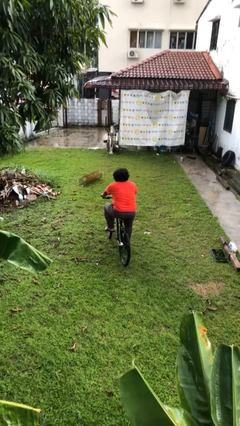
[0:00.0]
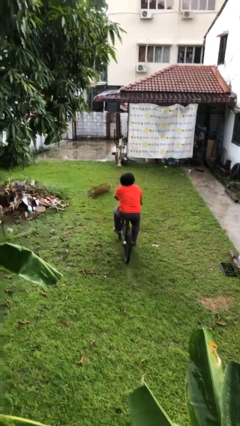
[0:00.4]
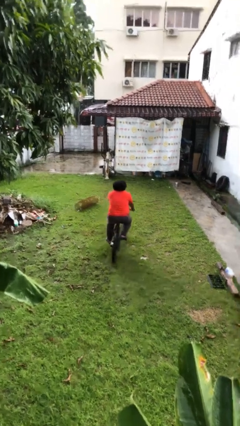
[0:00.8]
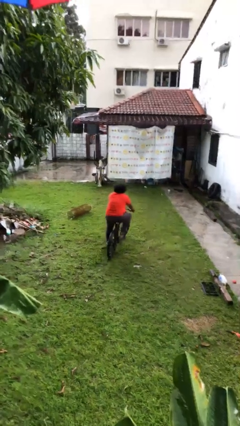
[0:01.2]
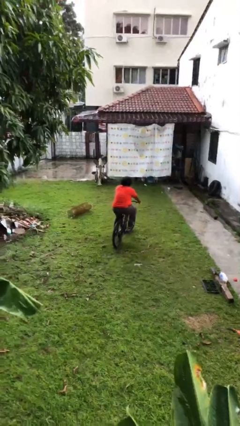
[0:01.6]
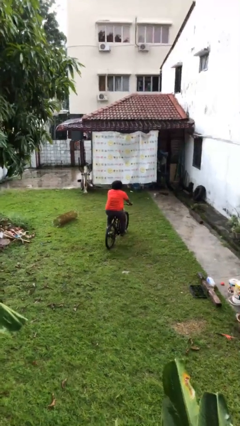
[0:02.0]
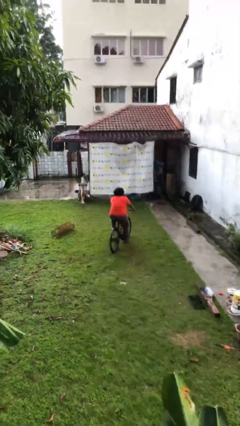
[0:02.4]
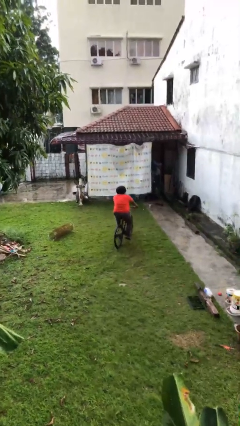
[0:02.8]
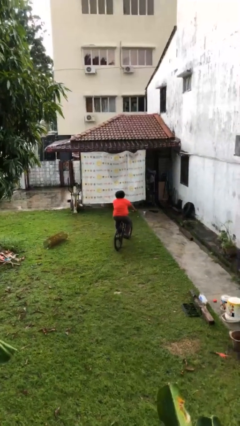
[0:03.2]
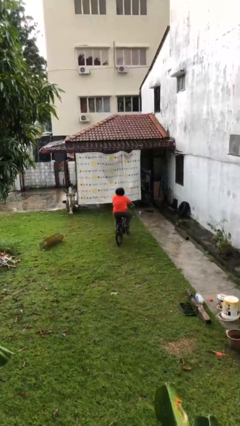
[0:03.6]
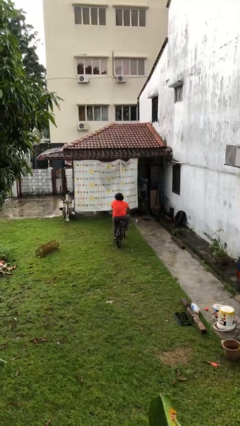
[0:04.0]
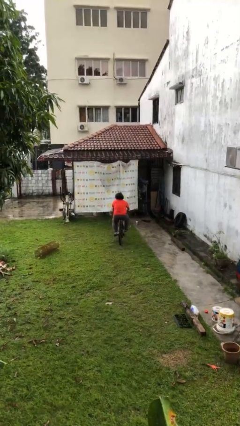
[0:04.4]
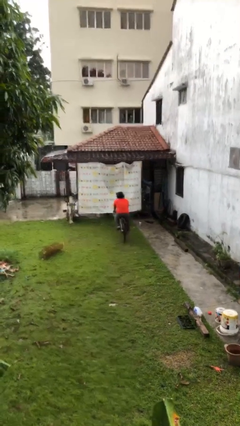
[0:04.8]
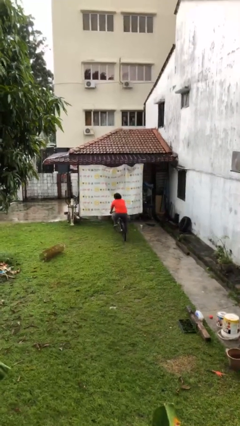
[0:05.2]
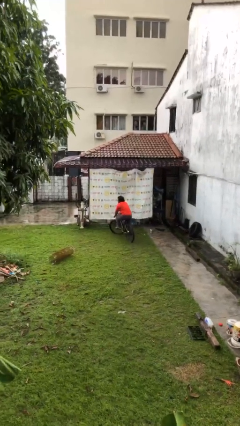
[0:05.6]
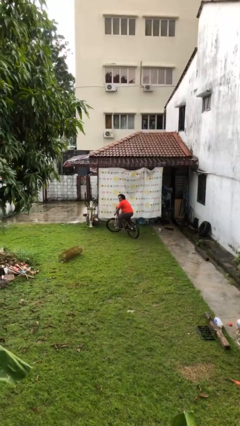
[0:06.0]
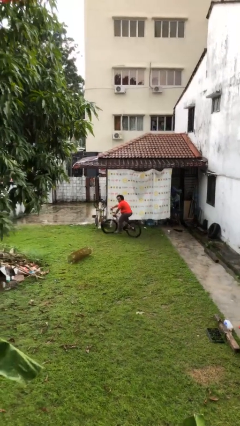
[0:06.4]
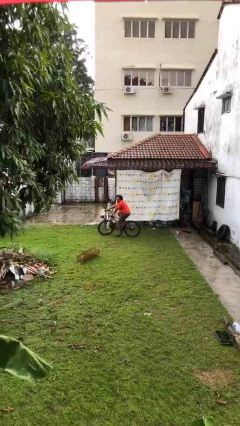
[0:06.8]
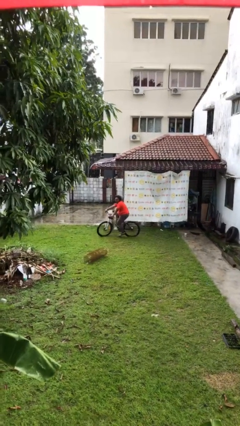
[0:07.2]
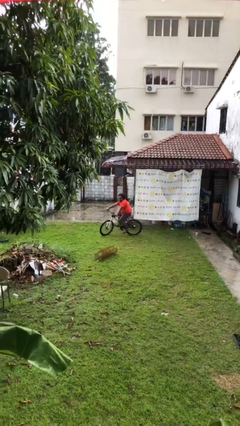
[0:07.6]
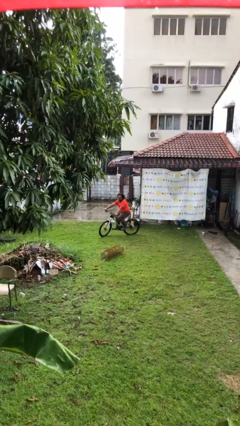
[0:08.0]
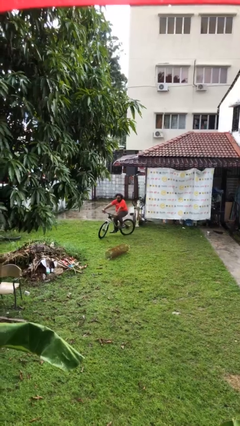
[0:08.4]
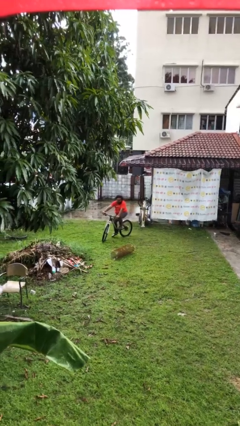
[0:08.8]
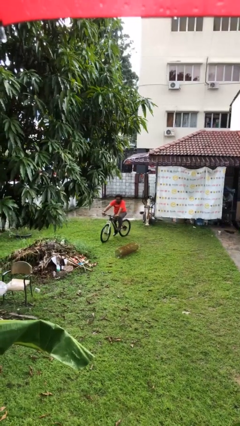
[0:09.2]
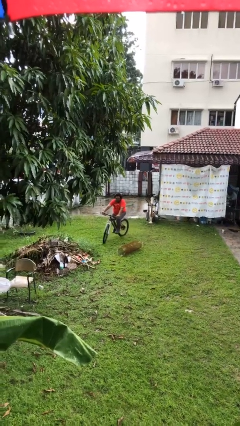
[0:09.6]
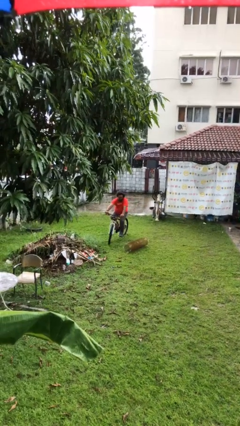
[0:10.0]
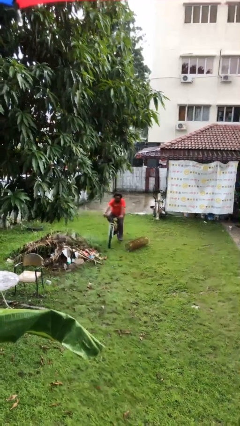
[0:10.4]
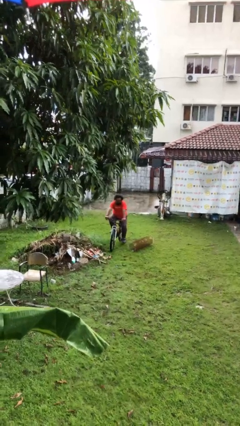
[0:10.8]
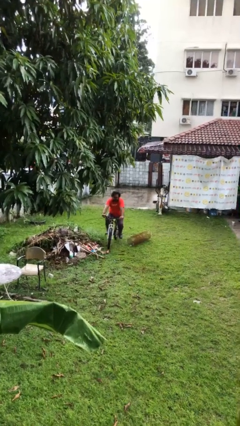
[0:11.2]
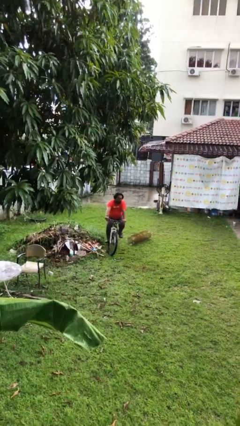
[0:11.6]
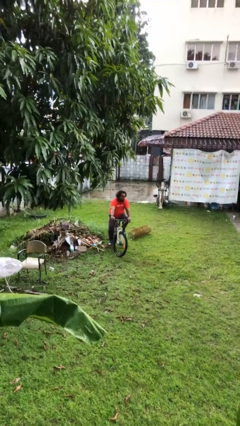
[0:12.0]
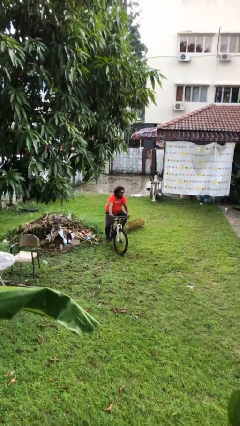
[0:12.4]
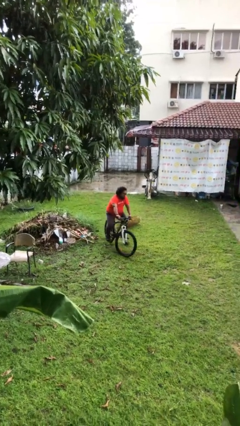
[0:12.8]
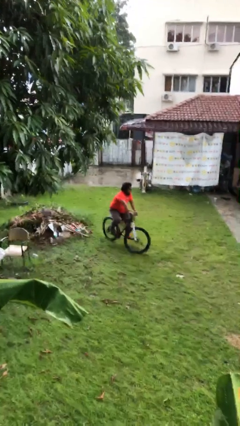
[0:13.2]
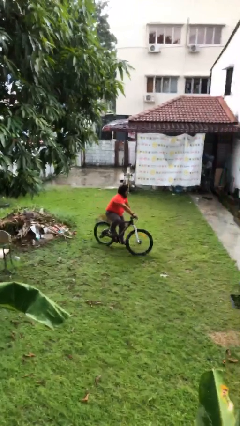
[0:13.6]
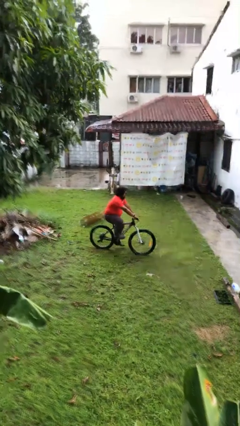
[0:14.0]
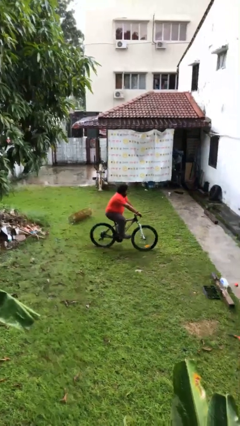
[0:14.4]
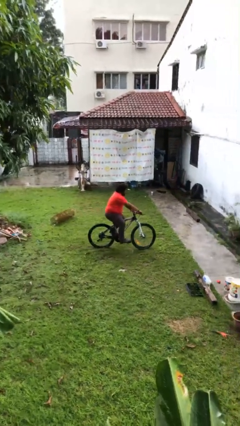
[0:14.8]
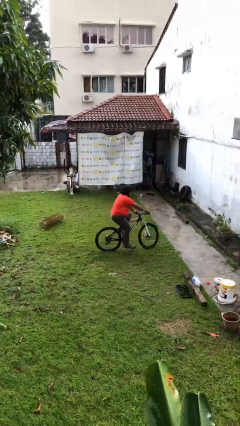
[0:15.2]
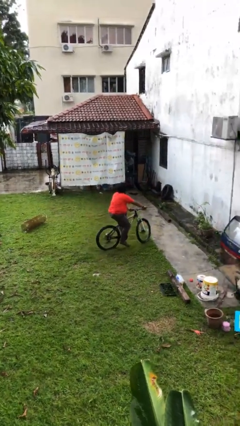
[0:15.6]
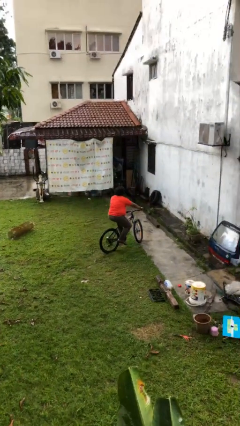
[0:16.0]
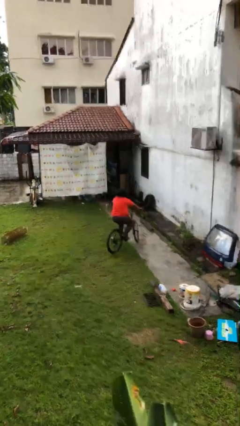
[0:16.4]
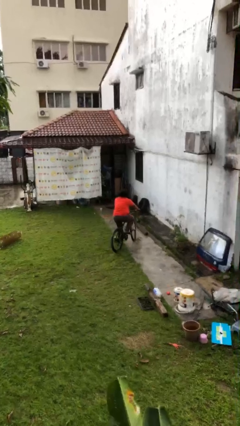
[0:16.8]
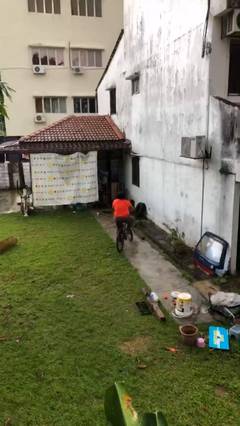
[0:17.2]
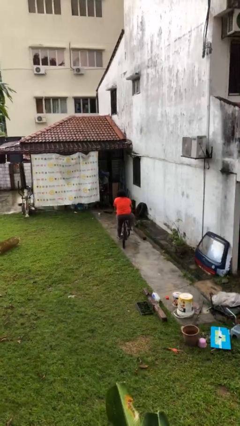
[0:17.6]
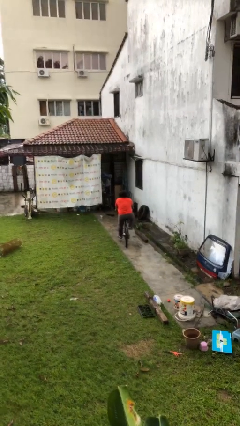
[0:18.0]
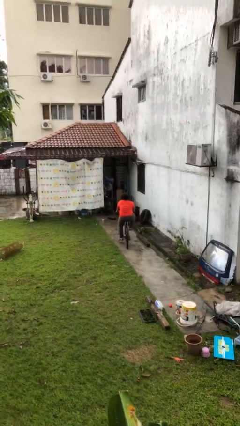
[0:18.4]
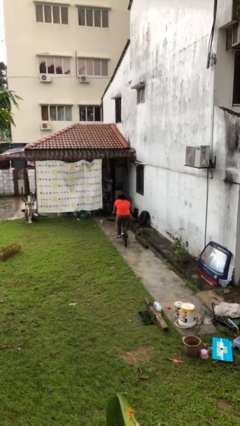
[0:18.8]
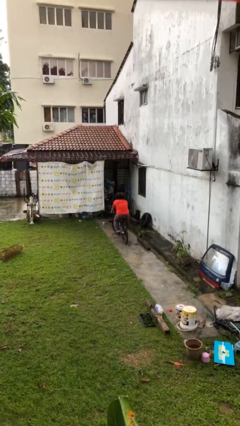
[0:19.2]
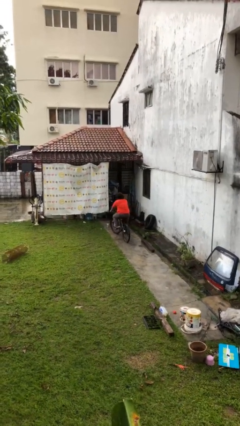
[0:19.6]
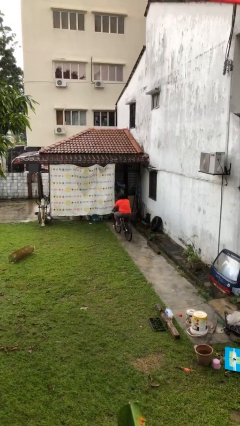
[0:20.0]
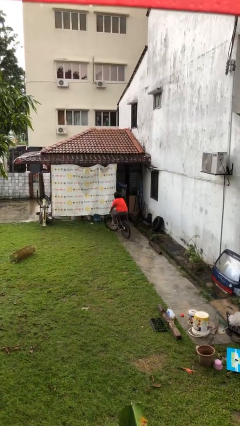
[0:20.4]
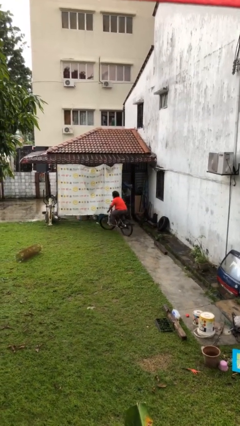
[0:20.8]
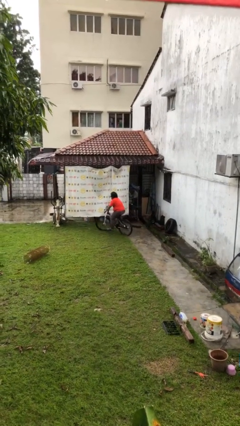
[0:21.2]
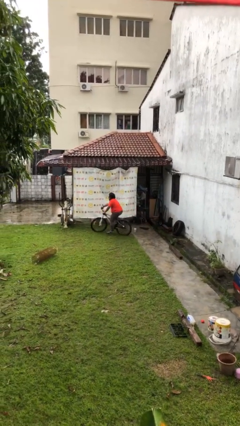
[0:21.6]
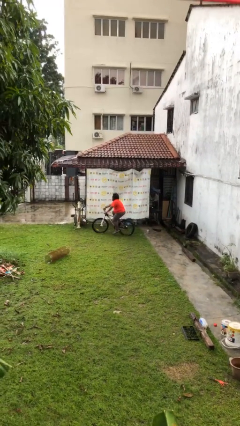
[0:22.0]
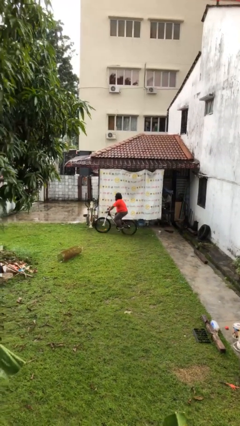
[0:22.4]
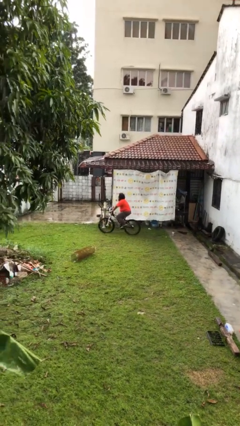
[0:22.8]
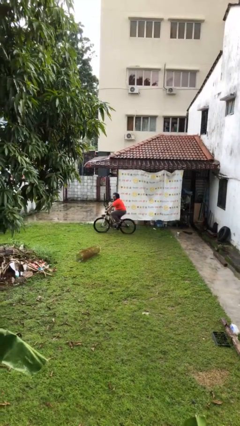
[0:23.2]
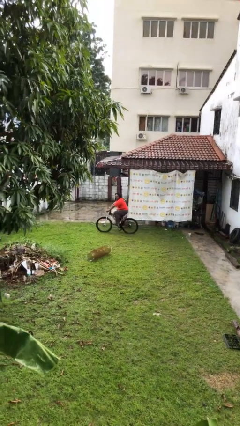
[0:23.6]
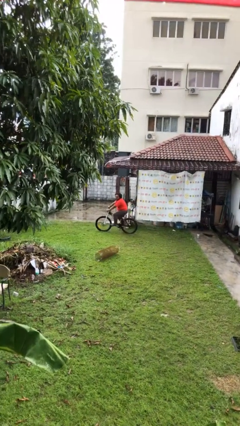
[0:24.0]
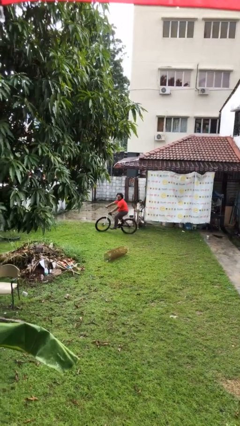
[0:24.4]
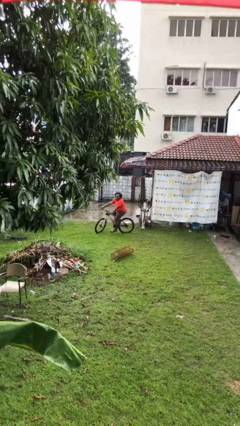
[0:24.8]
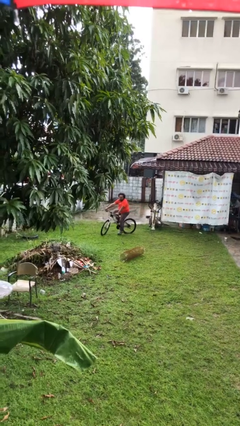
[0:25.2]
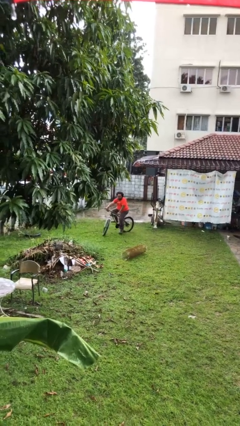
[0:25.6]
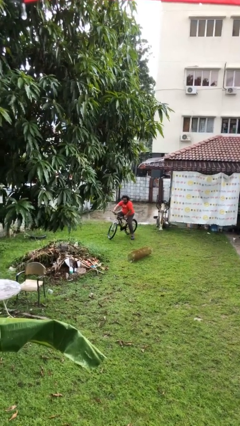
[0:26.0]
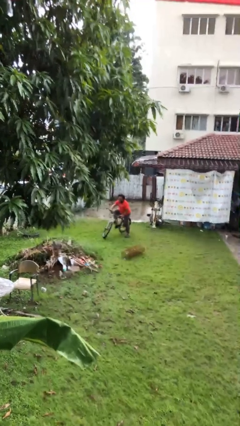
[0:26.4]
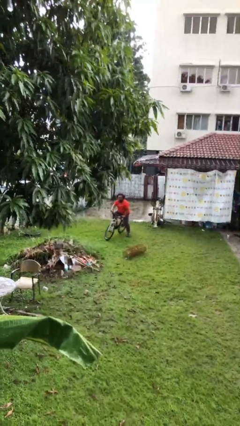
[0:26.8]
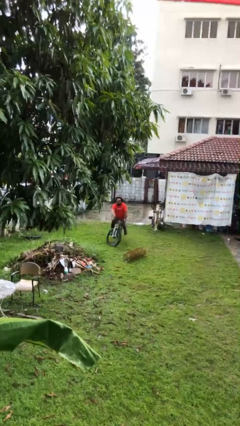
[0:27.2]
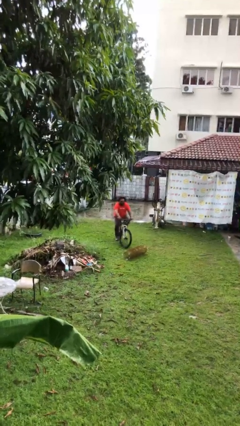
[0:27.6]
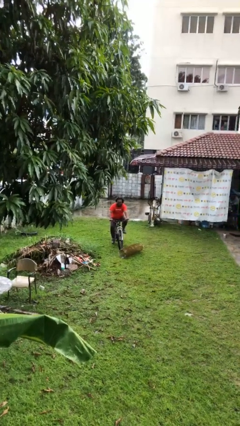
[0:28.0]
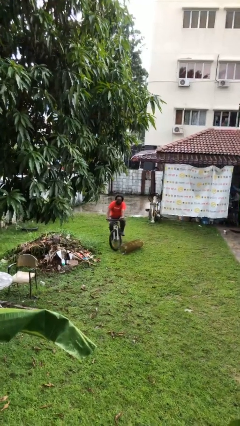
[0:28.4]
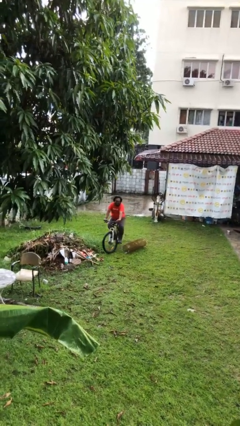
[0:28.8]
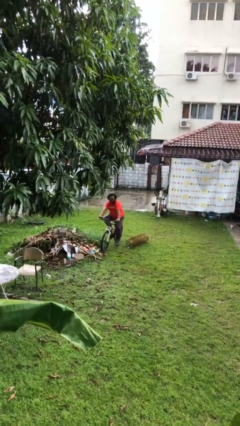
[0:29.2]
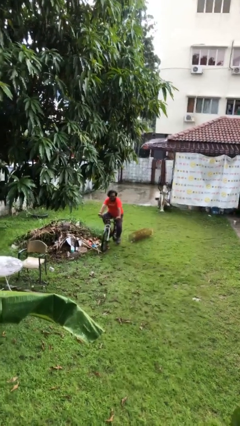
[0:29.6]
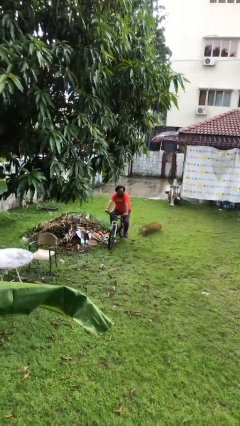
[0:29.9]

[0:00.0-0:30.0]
person rides bicycle

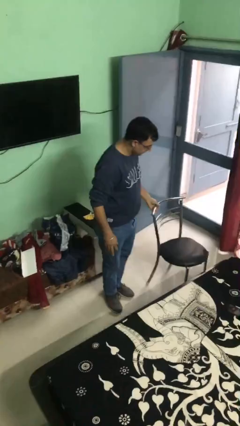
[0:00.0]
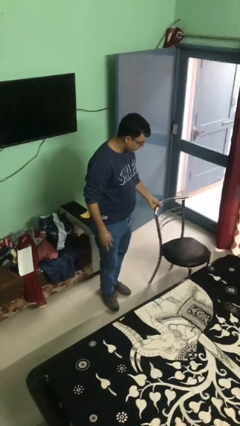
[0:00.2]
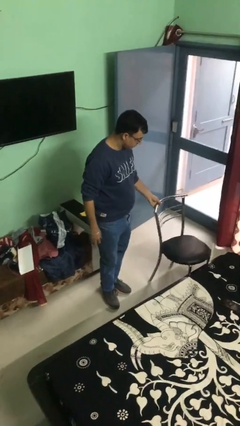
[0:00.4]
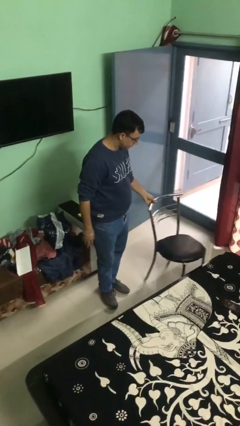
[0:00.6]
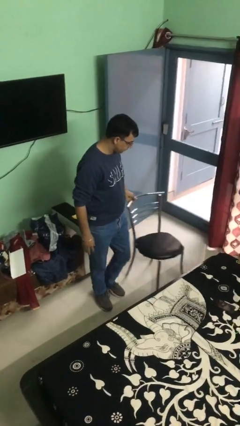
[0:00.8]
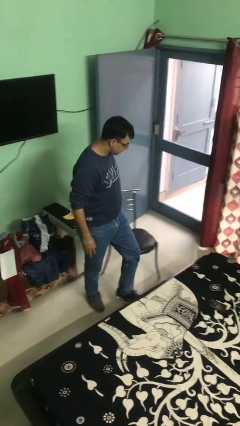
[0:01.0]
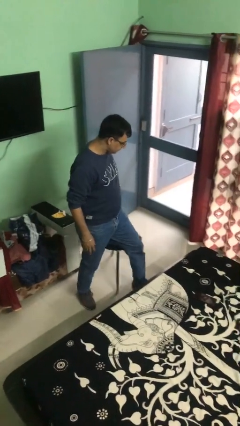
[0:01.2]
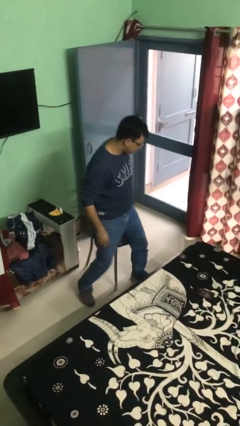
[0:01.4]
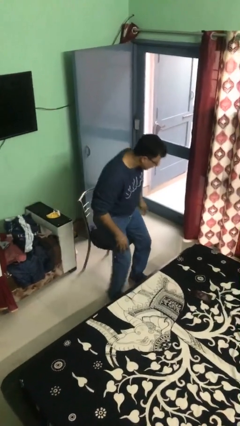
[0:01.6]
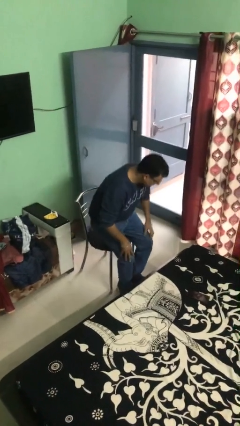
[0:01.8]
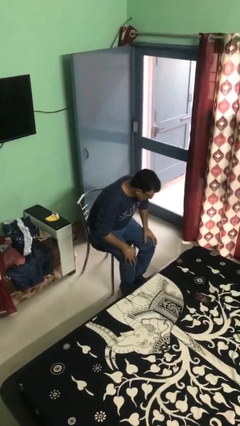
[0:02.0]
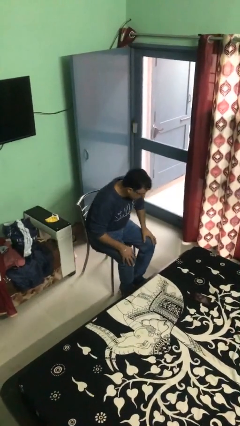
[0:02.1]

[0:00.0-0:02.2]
person sits down

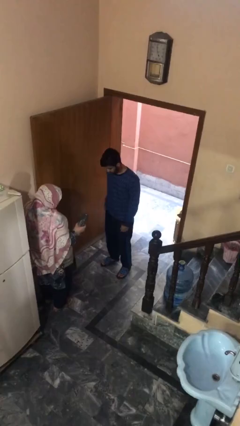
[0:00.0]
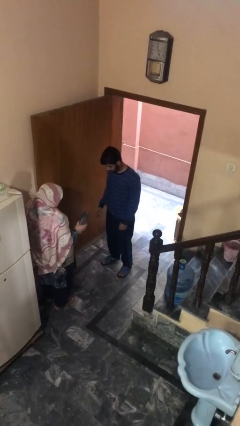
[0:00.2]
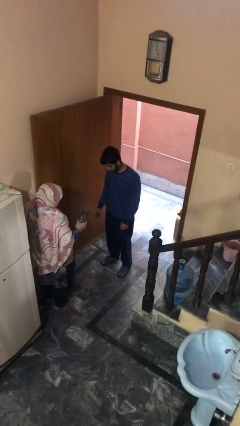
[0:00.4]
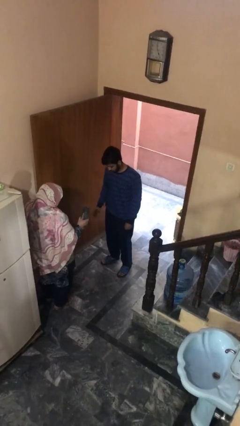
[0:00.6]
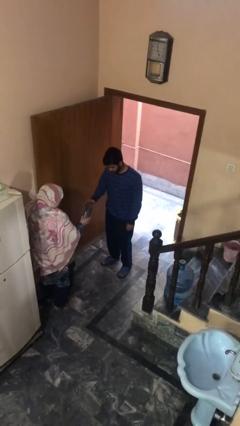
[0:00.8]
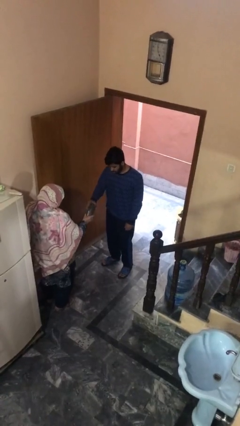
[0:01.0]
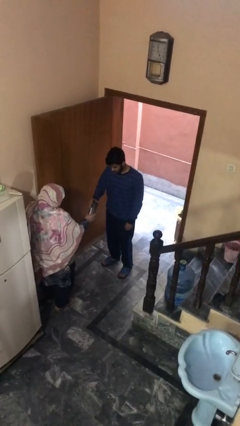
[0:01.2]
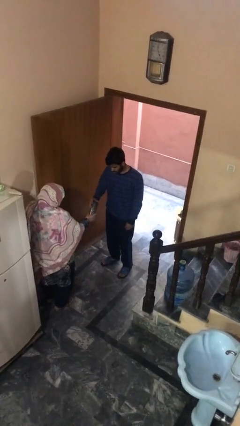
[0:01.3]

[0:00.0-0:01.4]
person transfers object to person
